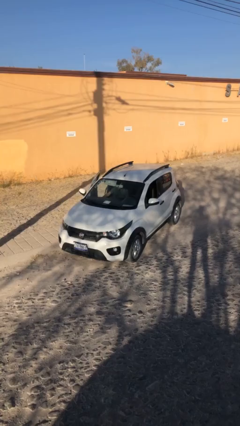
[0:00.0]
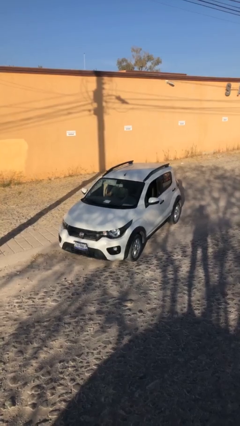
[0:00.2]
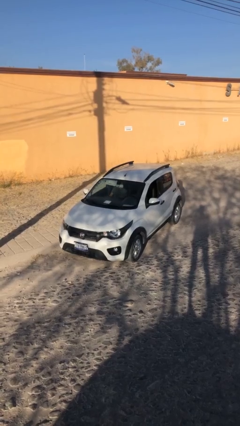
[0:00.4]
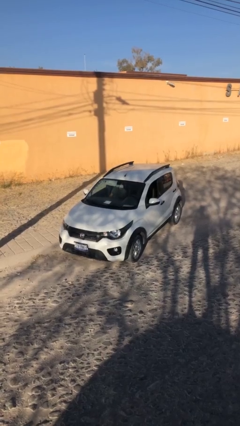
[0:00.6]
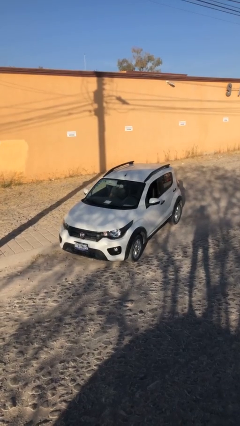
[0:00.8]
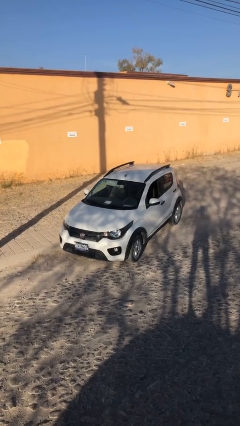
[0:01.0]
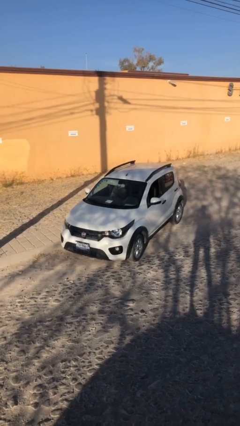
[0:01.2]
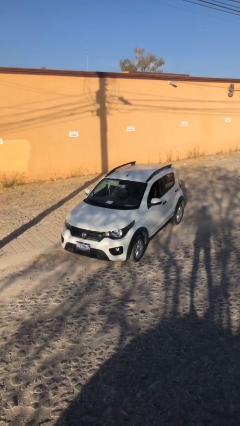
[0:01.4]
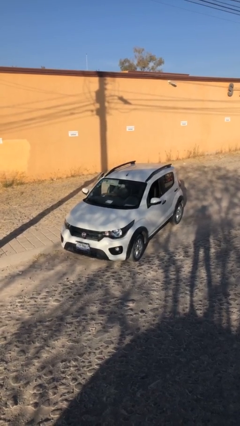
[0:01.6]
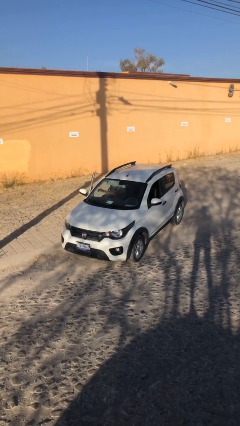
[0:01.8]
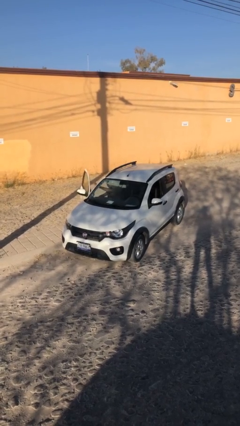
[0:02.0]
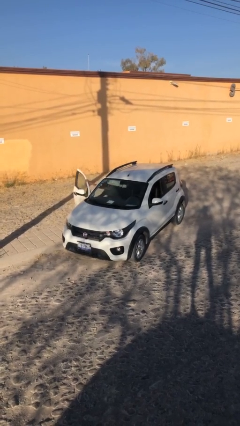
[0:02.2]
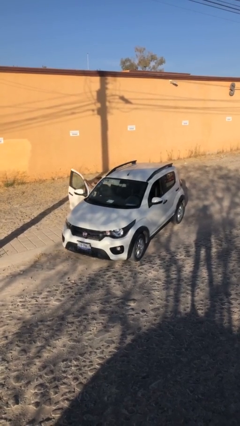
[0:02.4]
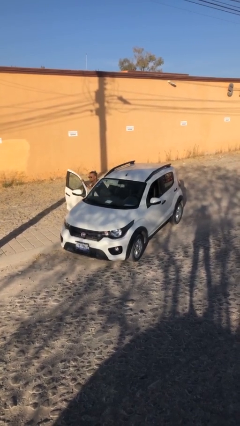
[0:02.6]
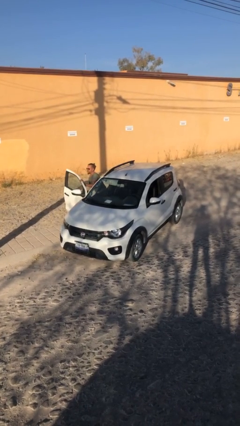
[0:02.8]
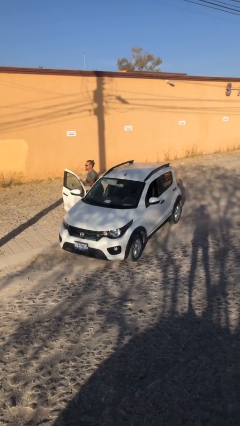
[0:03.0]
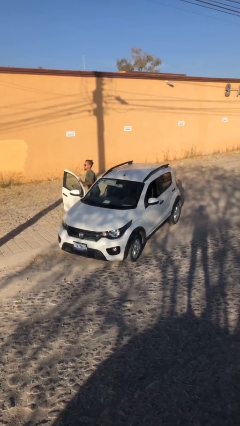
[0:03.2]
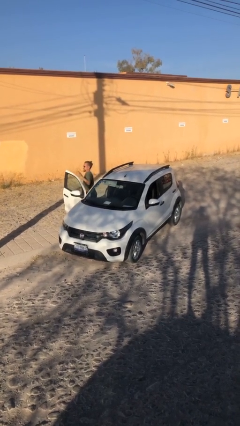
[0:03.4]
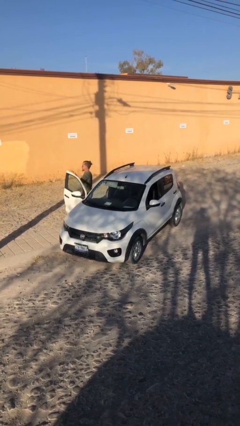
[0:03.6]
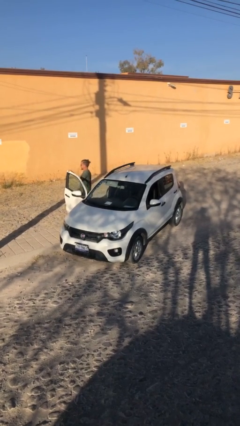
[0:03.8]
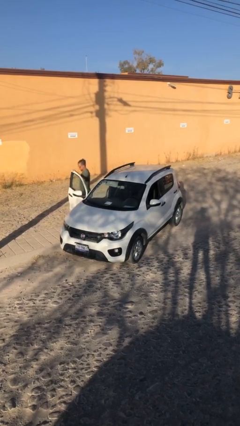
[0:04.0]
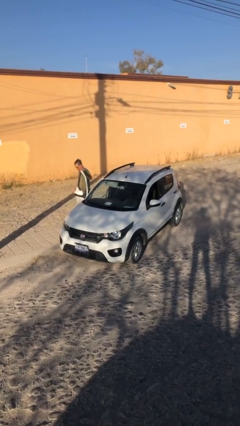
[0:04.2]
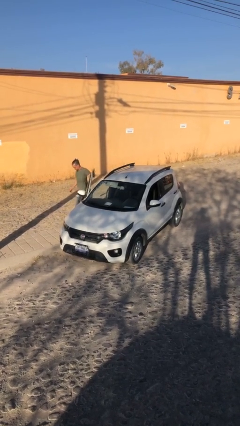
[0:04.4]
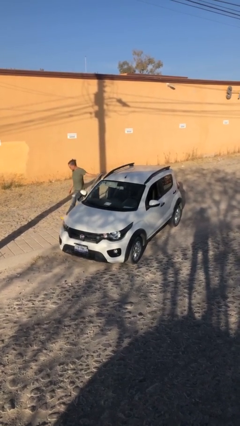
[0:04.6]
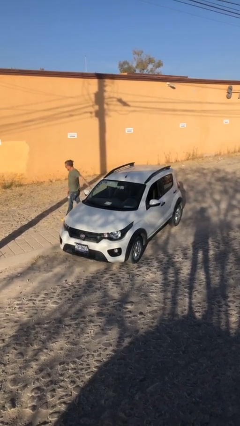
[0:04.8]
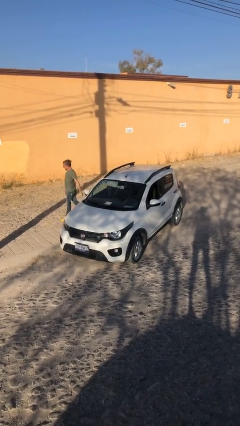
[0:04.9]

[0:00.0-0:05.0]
car drops off person

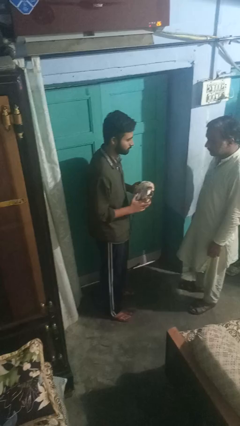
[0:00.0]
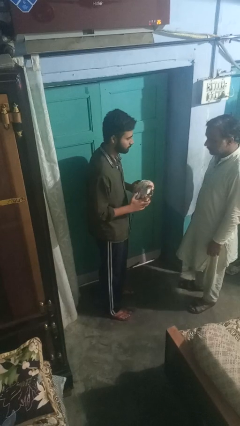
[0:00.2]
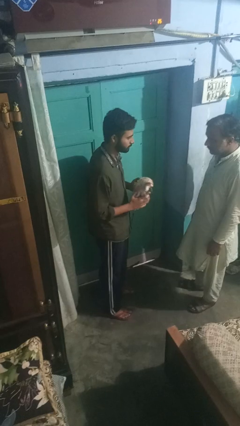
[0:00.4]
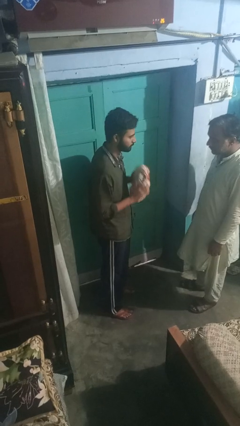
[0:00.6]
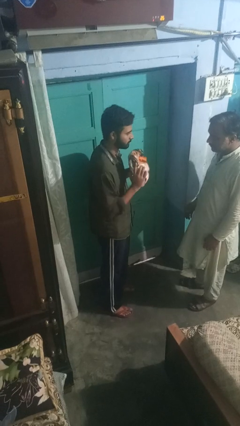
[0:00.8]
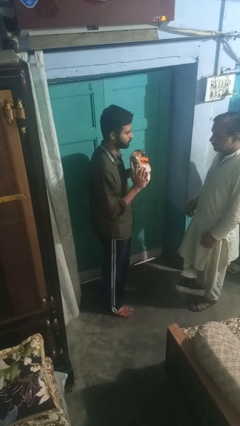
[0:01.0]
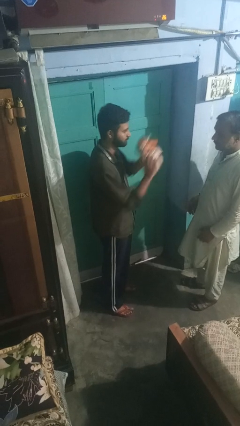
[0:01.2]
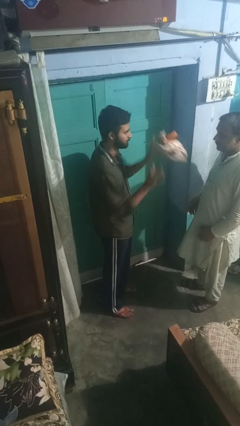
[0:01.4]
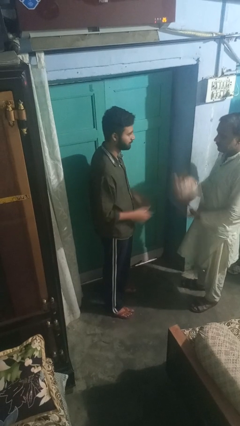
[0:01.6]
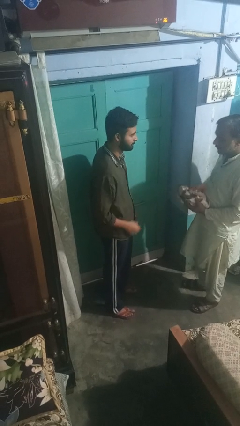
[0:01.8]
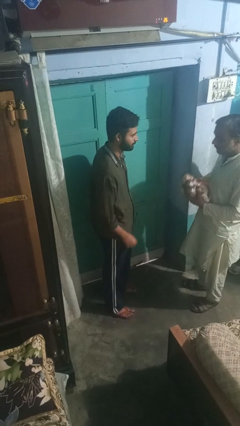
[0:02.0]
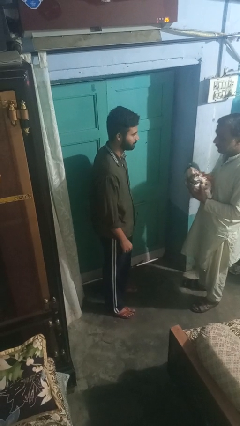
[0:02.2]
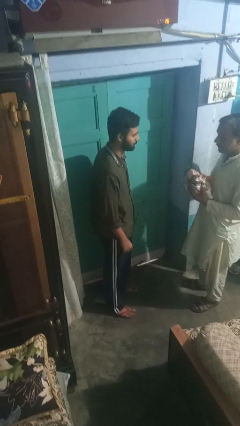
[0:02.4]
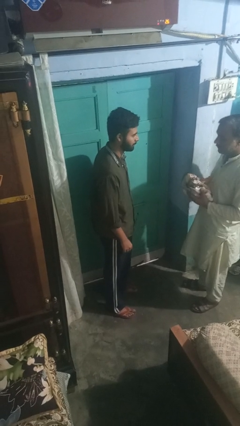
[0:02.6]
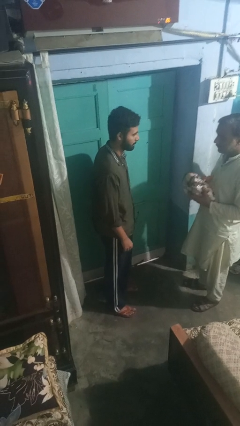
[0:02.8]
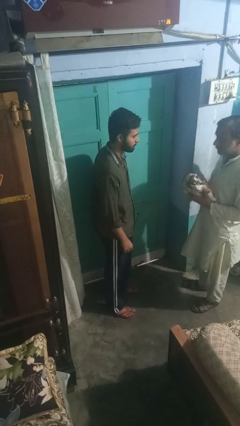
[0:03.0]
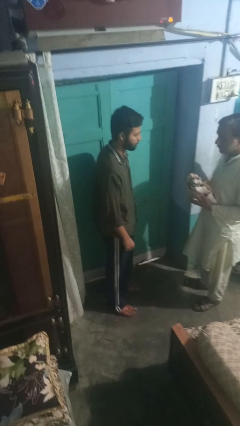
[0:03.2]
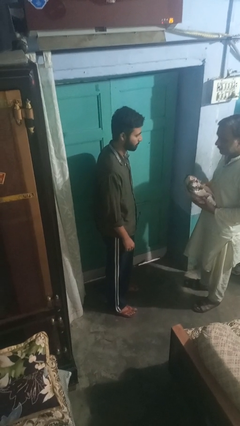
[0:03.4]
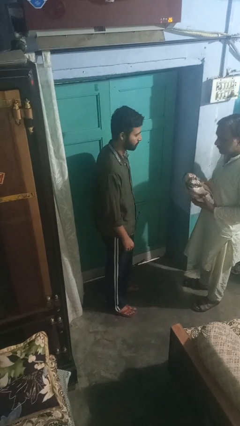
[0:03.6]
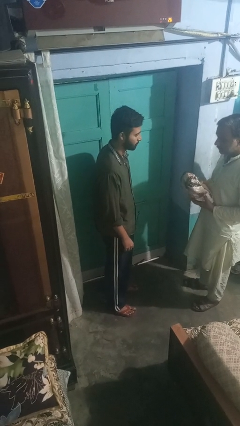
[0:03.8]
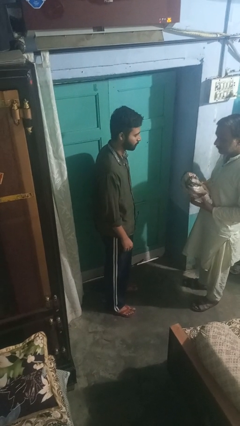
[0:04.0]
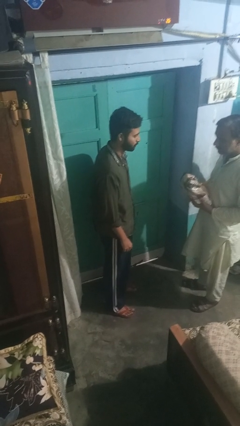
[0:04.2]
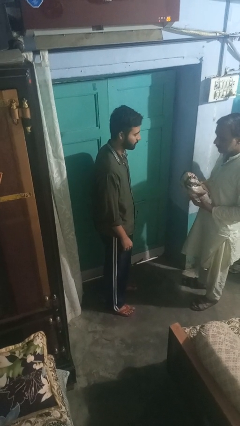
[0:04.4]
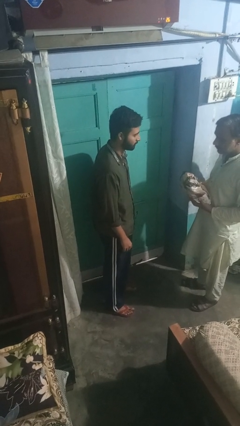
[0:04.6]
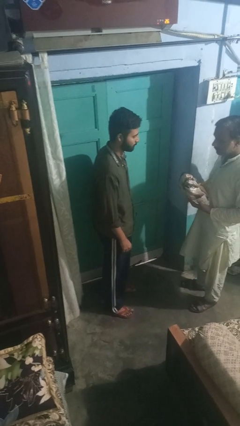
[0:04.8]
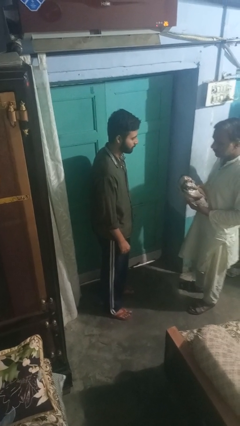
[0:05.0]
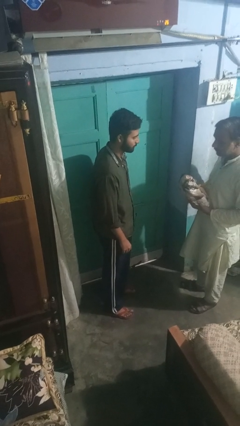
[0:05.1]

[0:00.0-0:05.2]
person throws object to person

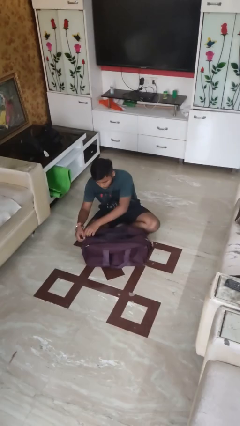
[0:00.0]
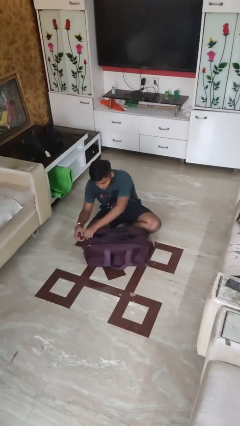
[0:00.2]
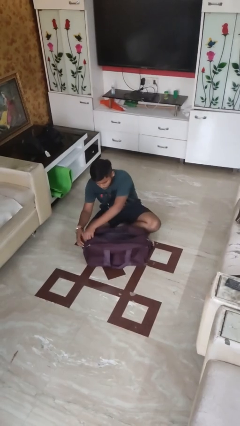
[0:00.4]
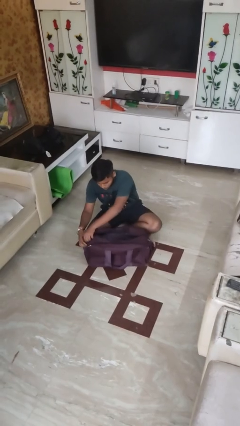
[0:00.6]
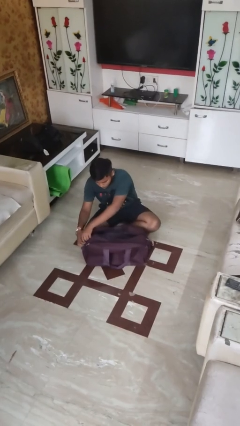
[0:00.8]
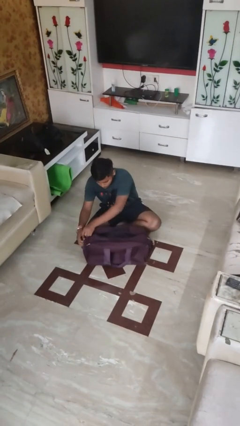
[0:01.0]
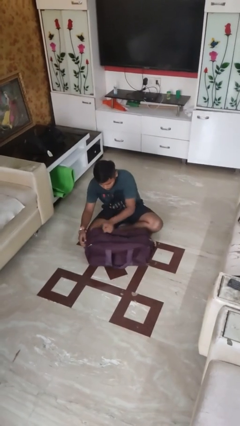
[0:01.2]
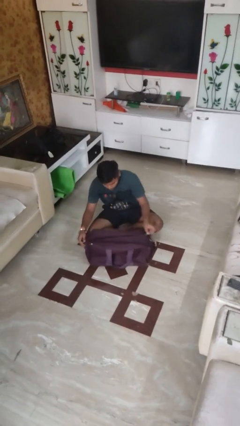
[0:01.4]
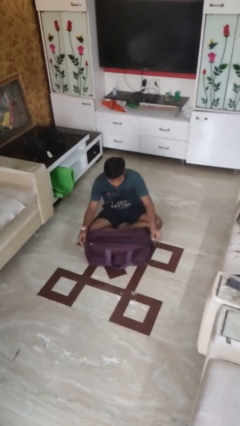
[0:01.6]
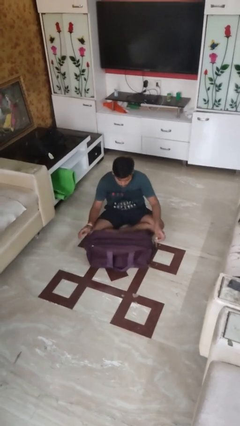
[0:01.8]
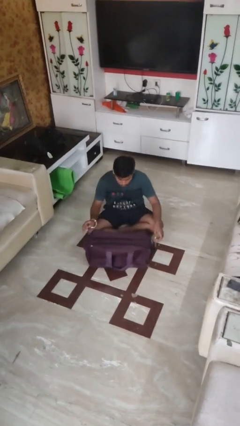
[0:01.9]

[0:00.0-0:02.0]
person closes suitcase

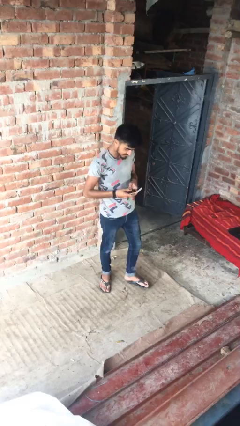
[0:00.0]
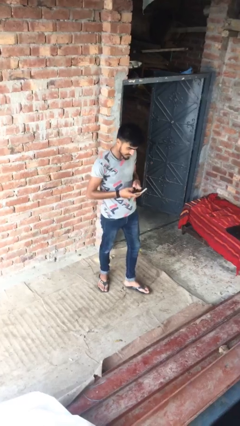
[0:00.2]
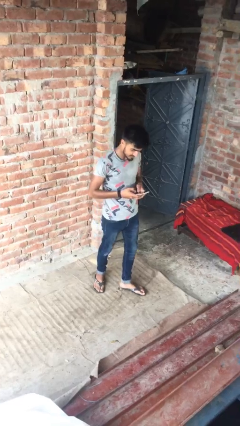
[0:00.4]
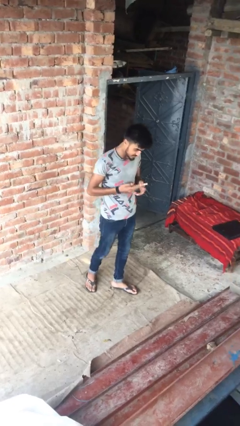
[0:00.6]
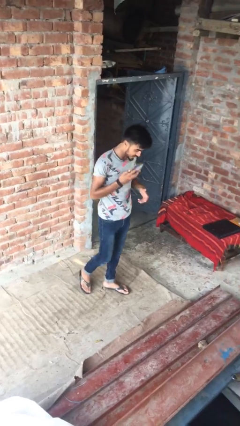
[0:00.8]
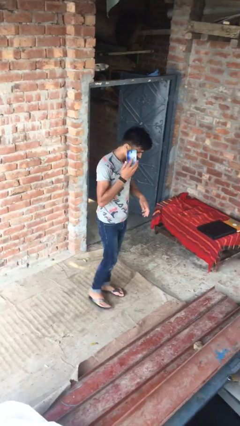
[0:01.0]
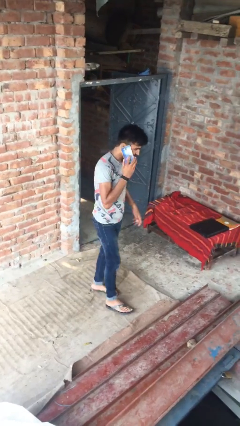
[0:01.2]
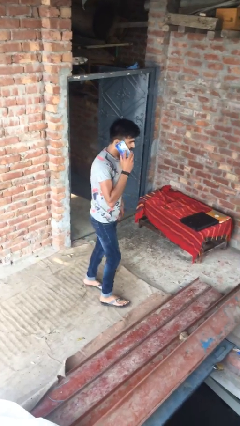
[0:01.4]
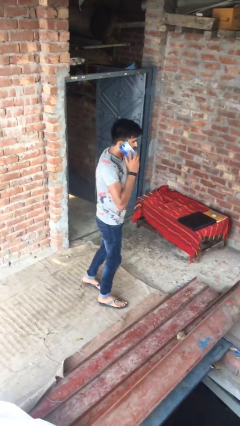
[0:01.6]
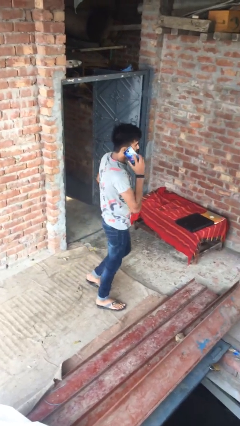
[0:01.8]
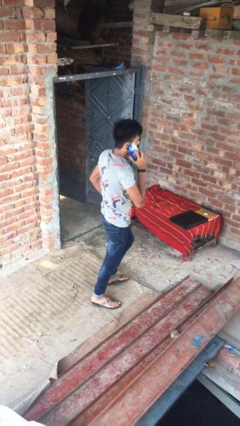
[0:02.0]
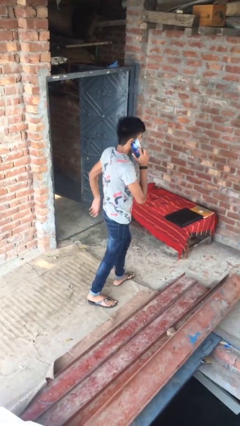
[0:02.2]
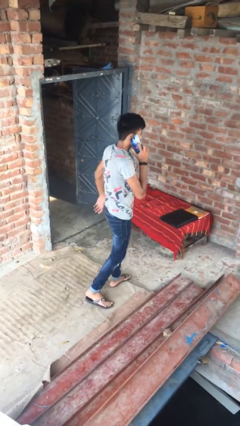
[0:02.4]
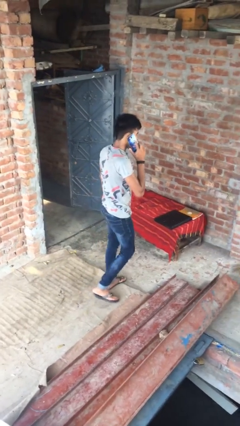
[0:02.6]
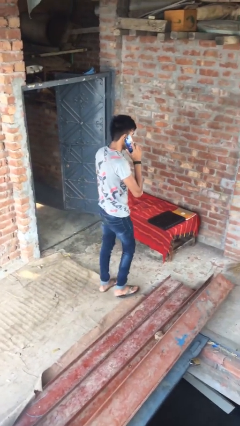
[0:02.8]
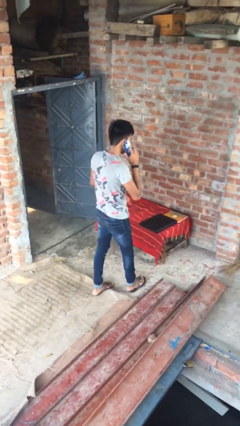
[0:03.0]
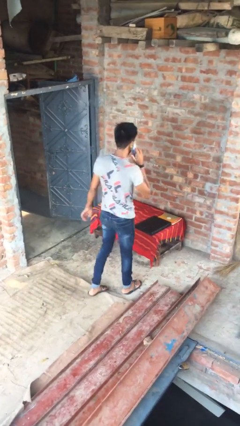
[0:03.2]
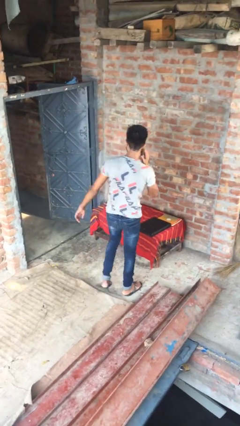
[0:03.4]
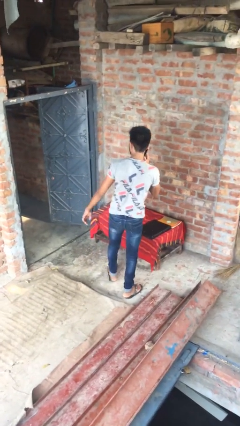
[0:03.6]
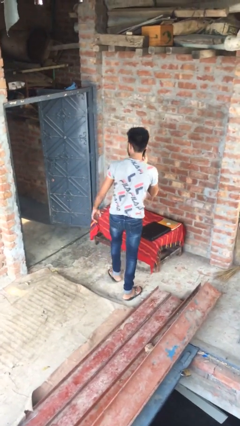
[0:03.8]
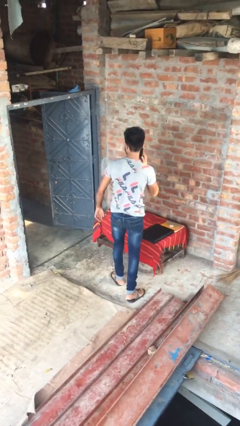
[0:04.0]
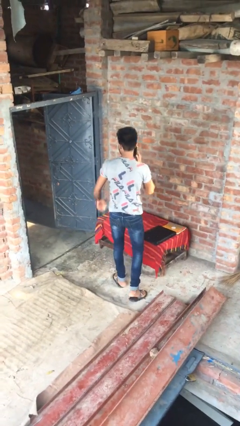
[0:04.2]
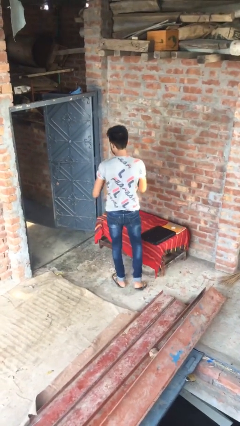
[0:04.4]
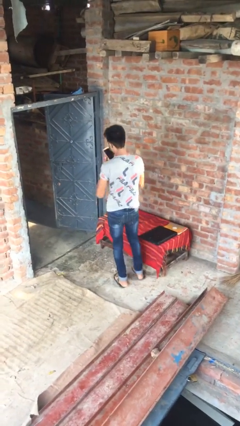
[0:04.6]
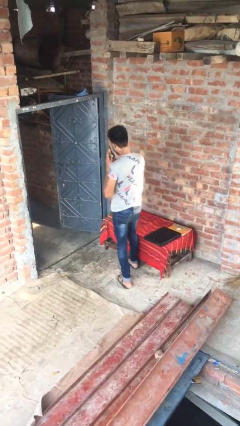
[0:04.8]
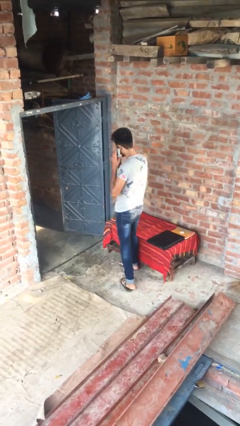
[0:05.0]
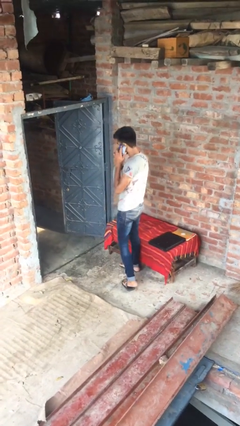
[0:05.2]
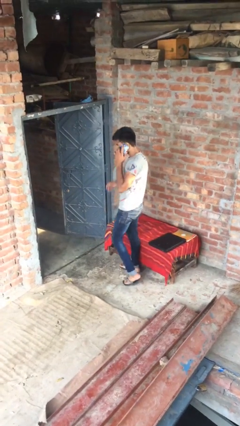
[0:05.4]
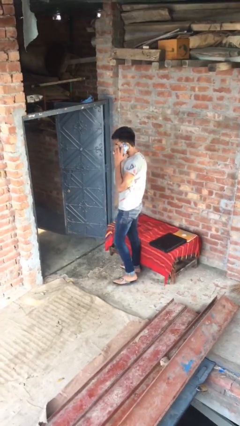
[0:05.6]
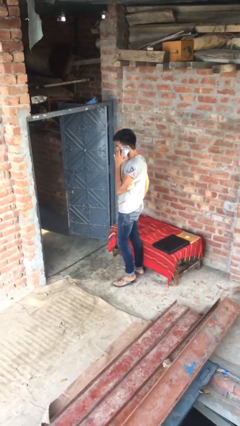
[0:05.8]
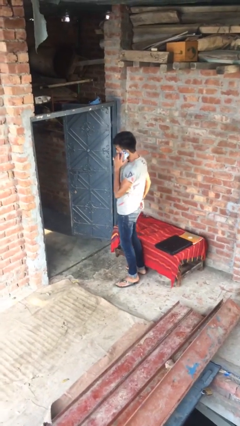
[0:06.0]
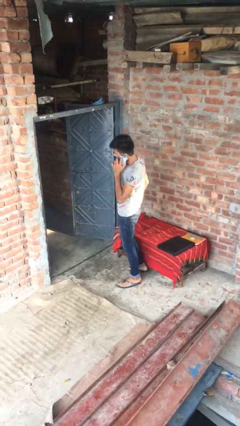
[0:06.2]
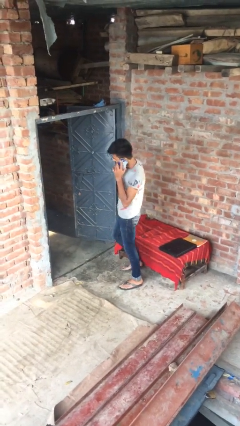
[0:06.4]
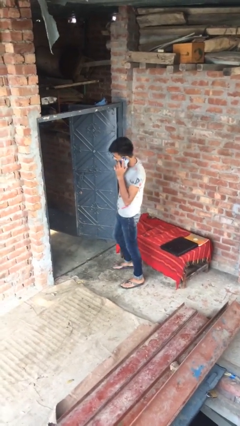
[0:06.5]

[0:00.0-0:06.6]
person talks on phone
